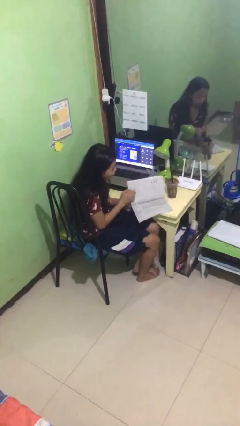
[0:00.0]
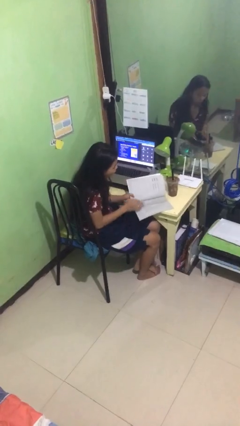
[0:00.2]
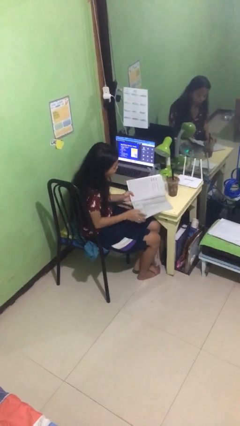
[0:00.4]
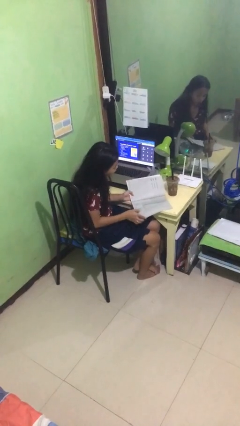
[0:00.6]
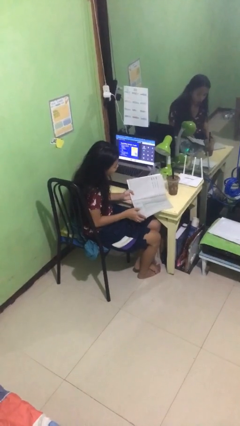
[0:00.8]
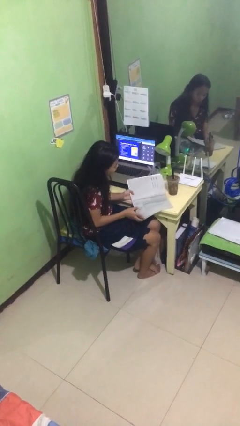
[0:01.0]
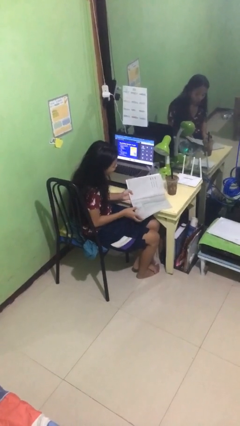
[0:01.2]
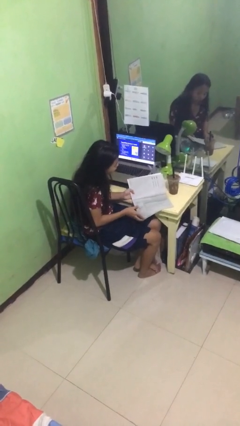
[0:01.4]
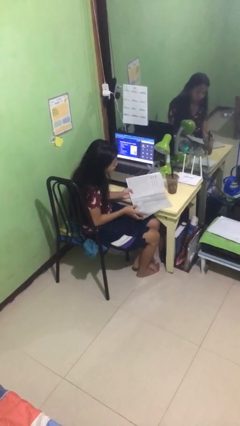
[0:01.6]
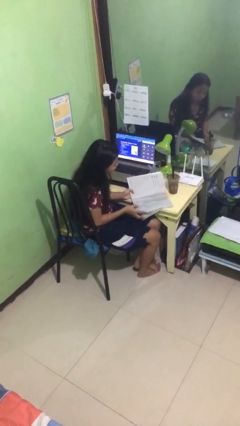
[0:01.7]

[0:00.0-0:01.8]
person reads document

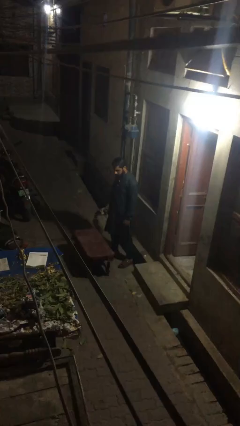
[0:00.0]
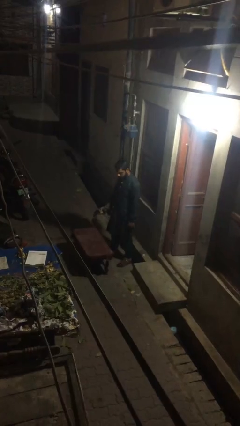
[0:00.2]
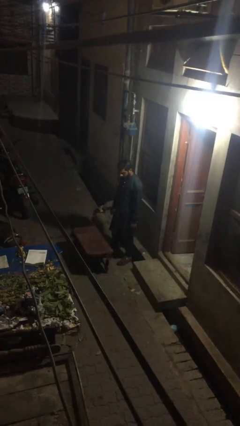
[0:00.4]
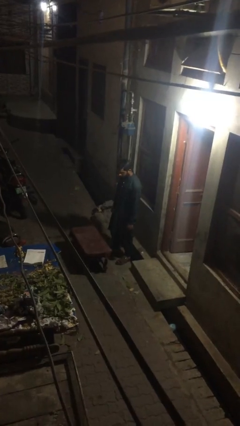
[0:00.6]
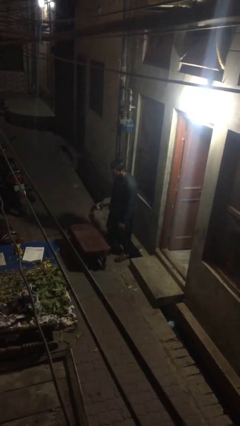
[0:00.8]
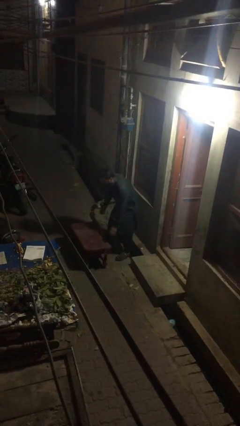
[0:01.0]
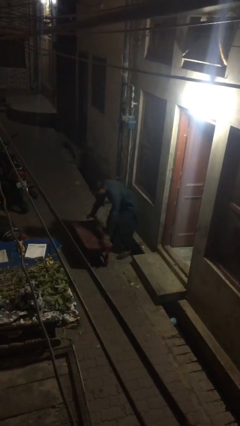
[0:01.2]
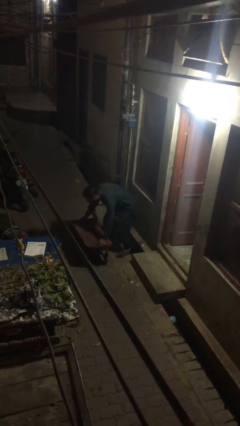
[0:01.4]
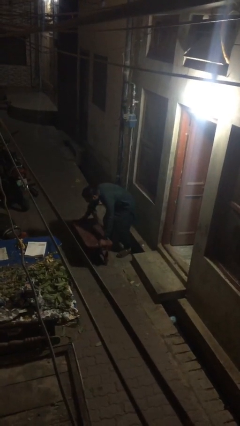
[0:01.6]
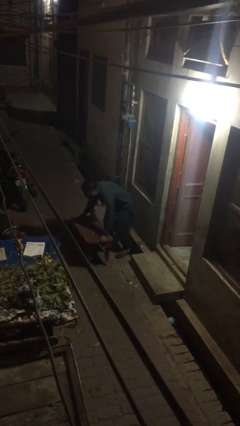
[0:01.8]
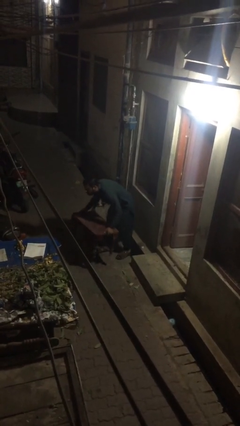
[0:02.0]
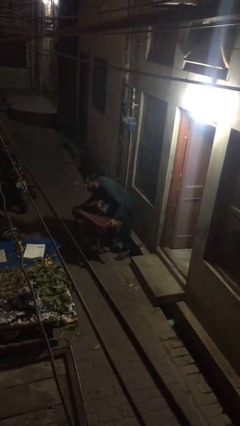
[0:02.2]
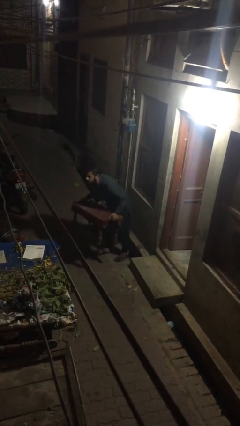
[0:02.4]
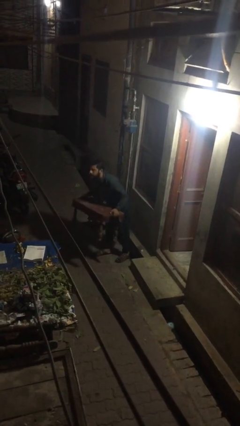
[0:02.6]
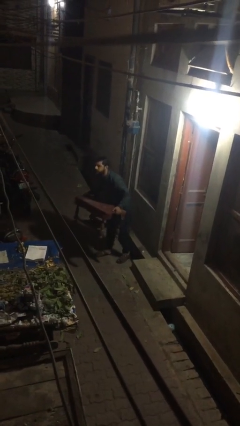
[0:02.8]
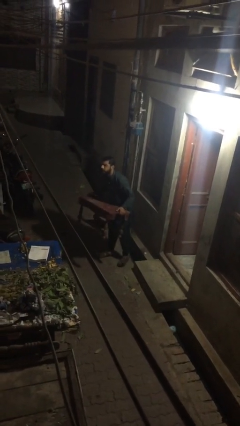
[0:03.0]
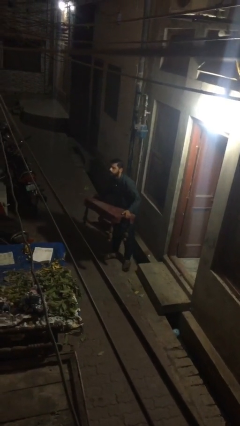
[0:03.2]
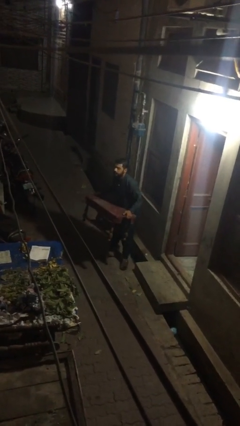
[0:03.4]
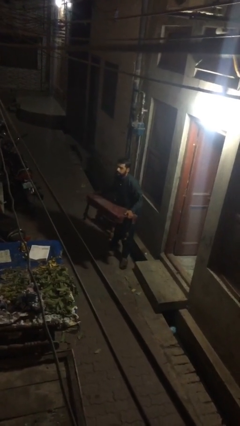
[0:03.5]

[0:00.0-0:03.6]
person picks up object from floor

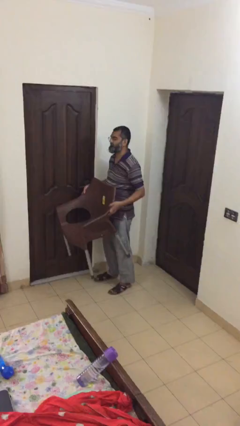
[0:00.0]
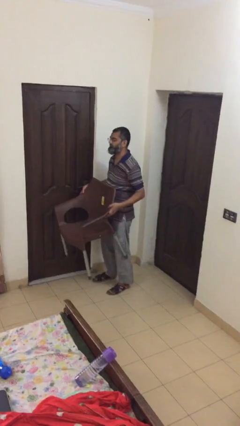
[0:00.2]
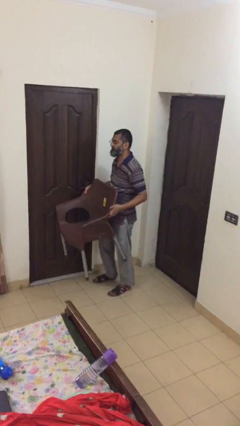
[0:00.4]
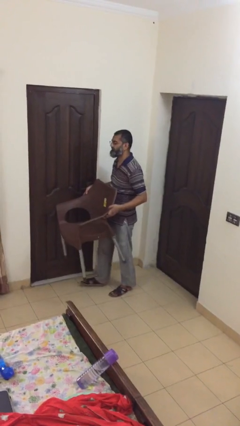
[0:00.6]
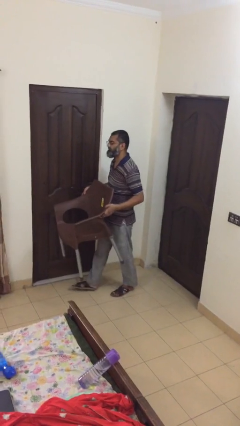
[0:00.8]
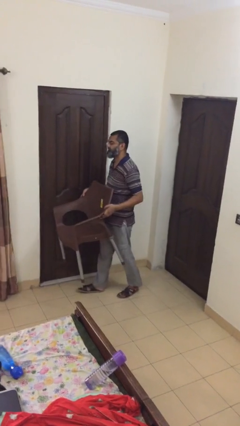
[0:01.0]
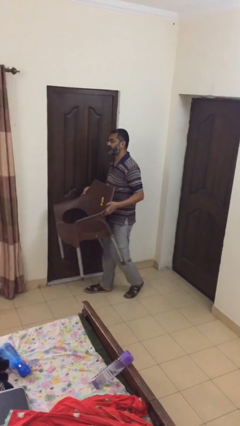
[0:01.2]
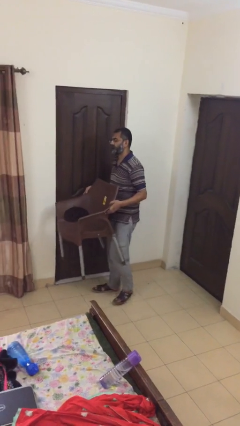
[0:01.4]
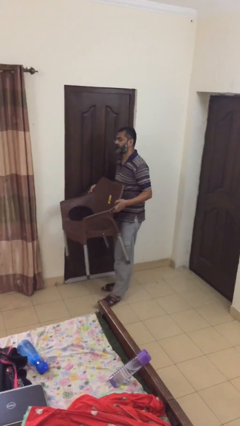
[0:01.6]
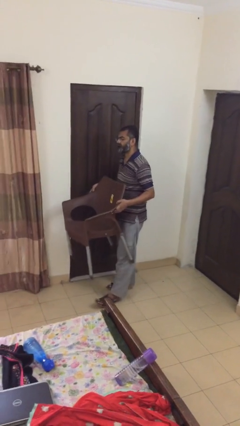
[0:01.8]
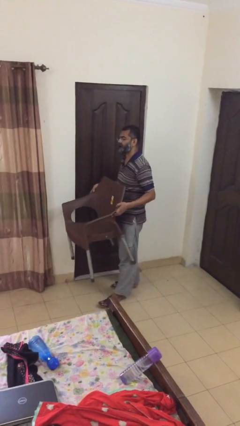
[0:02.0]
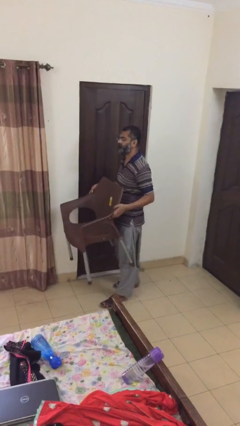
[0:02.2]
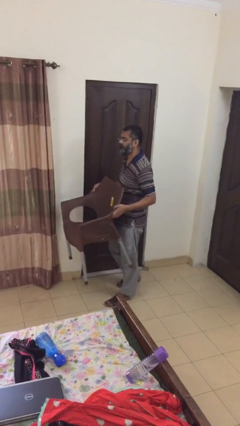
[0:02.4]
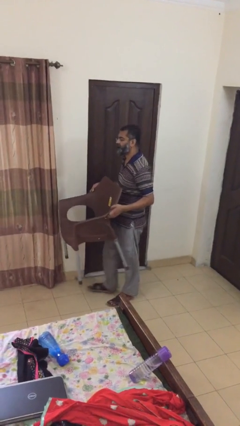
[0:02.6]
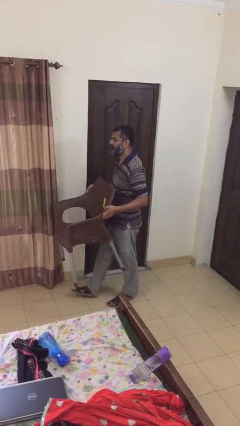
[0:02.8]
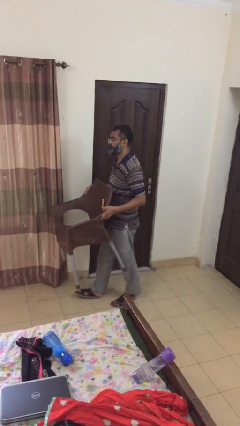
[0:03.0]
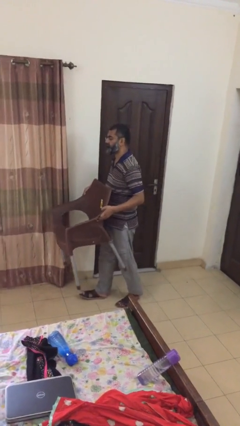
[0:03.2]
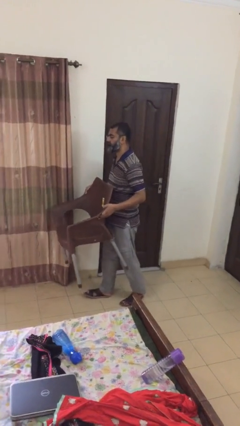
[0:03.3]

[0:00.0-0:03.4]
person carries heavy object

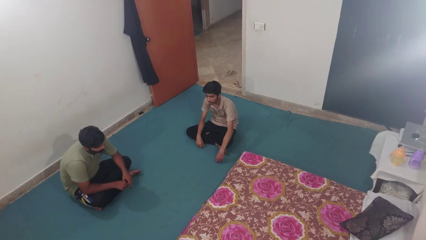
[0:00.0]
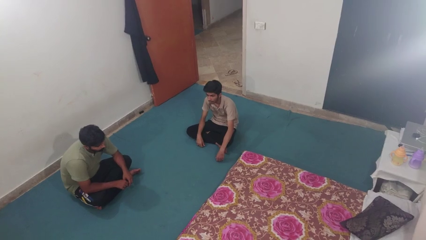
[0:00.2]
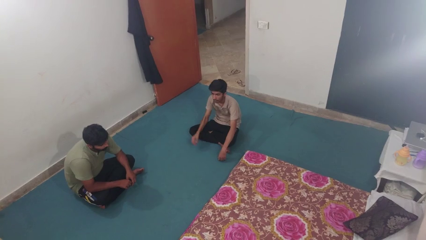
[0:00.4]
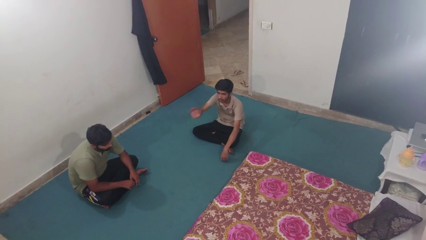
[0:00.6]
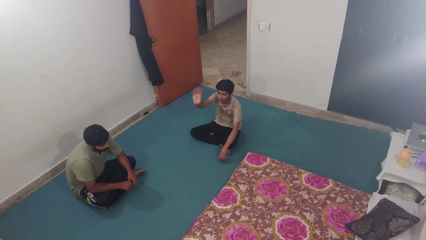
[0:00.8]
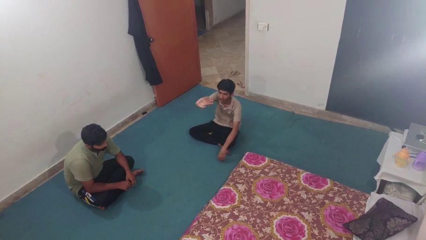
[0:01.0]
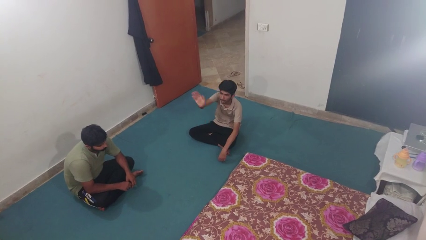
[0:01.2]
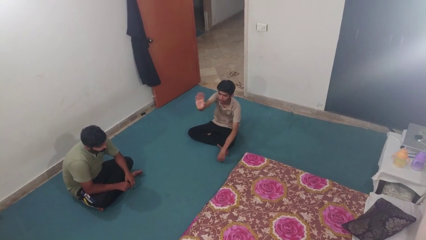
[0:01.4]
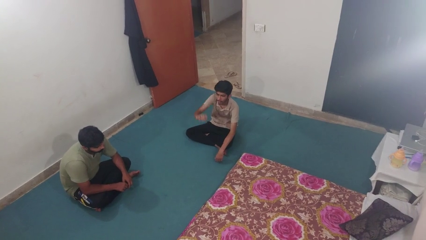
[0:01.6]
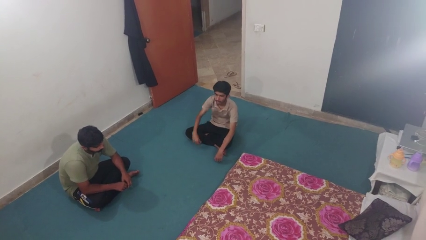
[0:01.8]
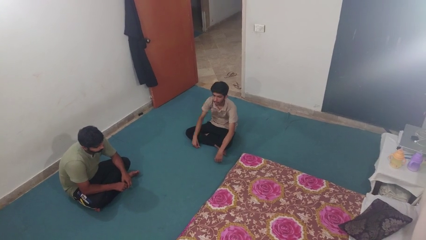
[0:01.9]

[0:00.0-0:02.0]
person waves at person

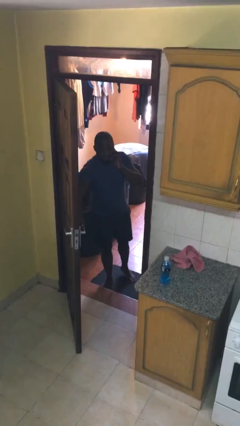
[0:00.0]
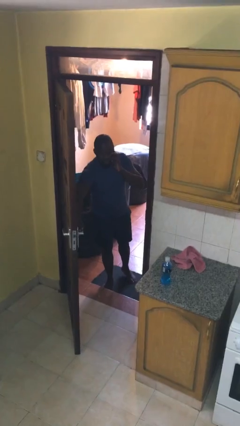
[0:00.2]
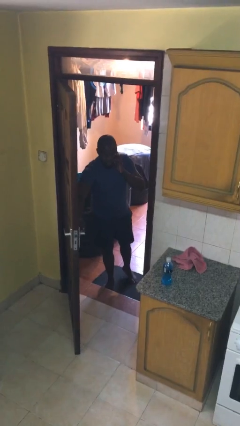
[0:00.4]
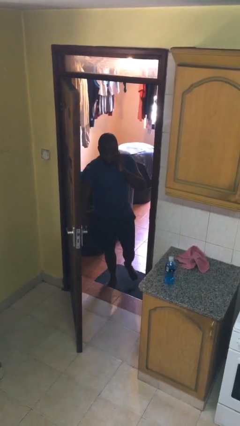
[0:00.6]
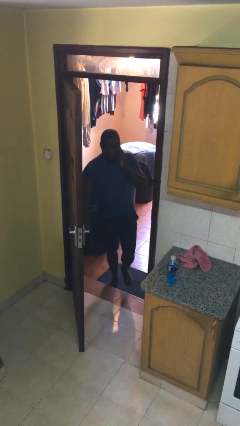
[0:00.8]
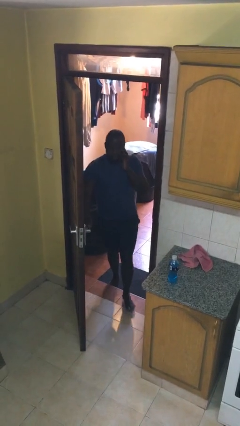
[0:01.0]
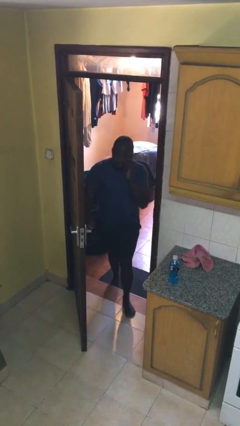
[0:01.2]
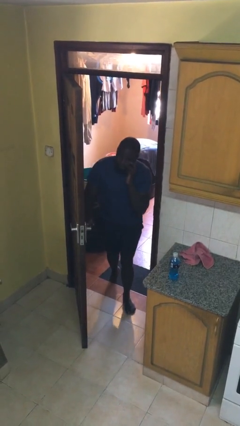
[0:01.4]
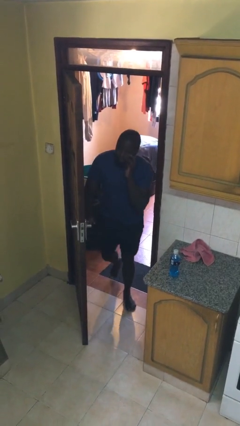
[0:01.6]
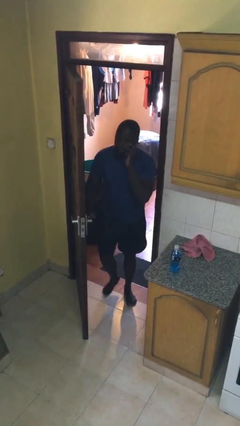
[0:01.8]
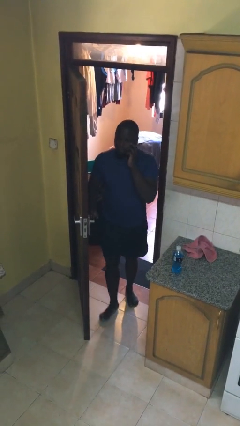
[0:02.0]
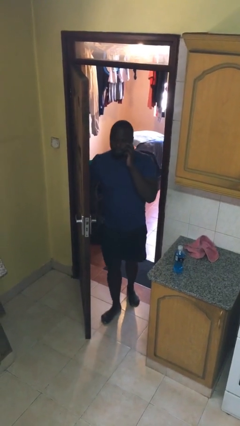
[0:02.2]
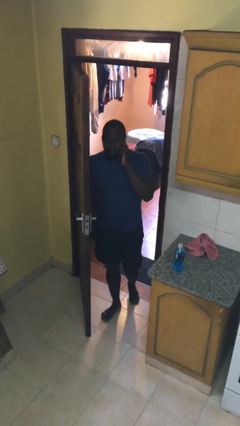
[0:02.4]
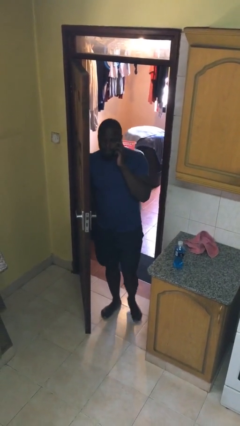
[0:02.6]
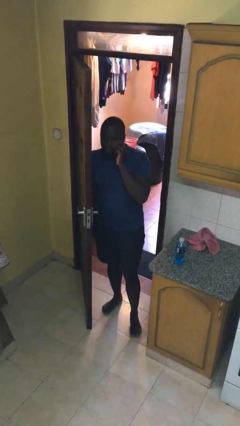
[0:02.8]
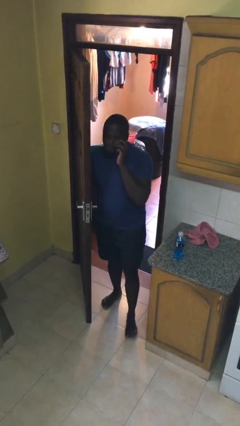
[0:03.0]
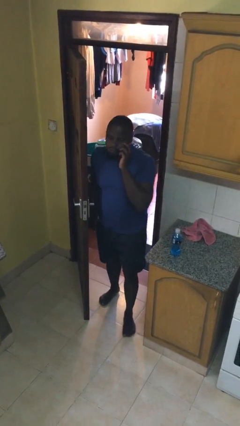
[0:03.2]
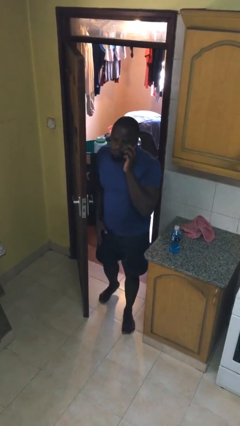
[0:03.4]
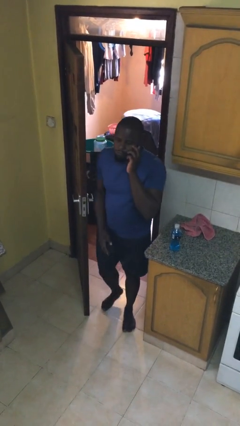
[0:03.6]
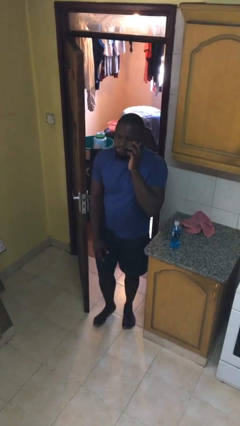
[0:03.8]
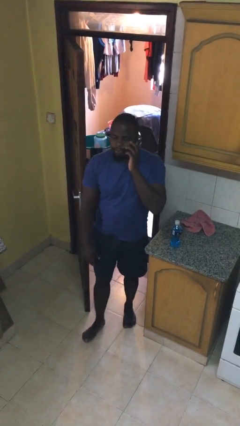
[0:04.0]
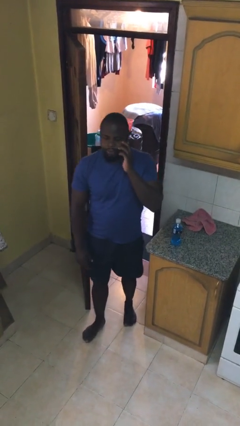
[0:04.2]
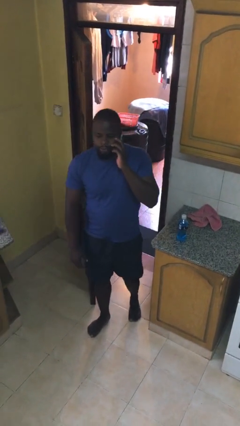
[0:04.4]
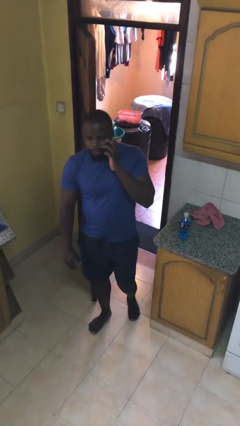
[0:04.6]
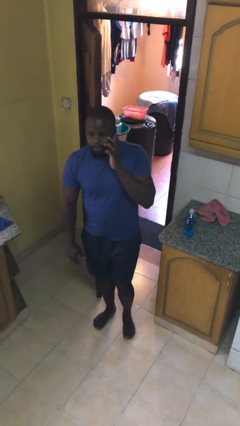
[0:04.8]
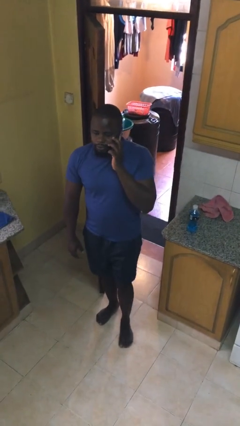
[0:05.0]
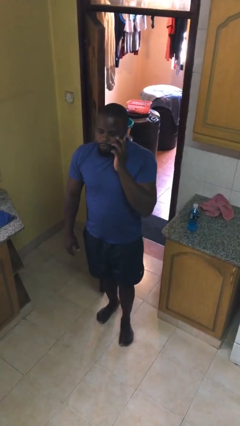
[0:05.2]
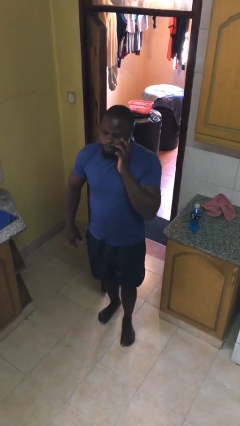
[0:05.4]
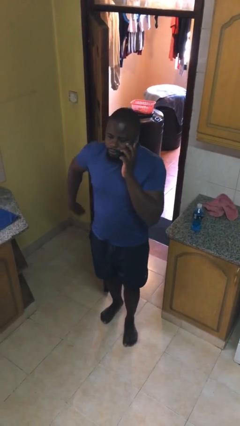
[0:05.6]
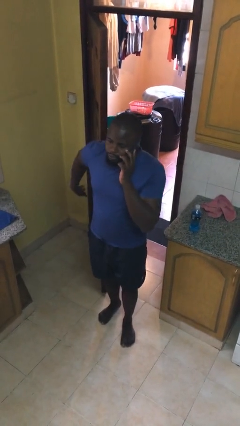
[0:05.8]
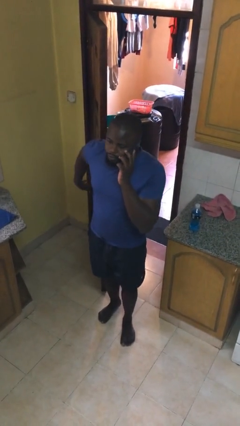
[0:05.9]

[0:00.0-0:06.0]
person enters scene through structure

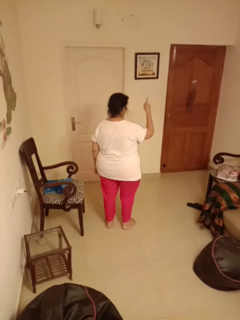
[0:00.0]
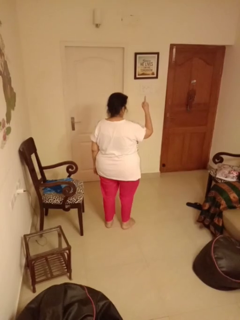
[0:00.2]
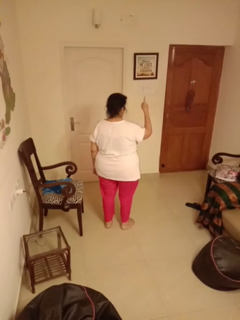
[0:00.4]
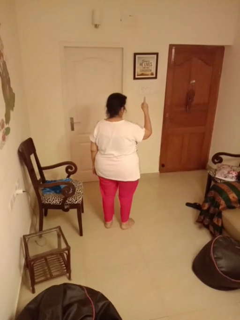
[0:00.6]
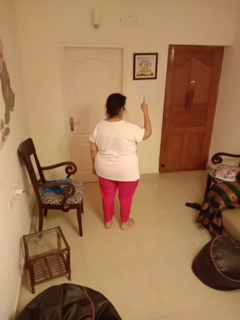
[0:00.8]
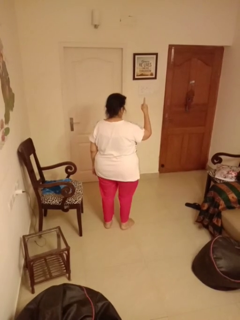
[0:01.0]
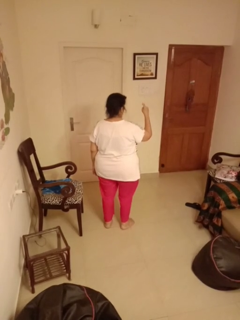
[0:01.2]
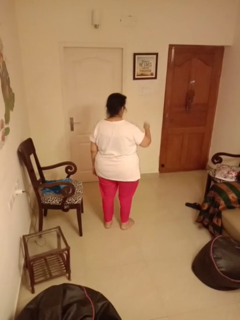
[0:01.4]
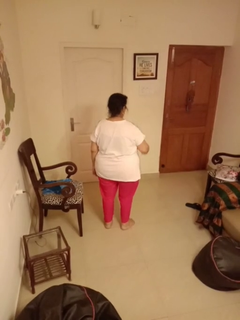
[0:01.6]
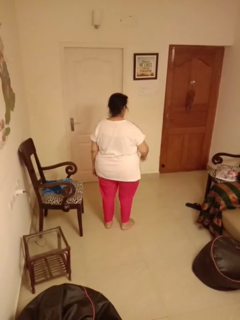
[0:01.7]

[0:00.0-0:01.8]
person gestures number one
